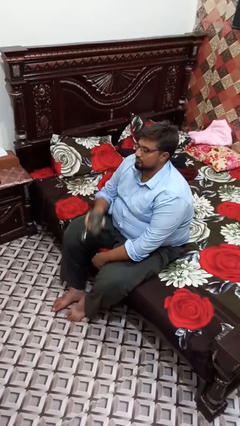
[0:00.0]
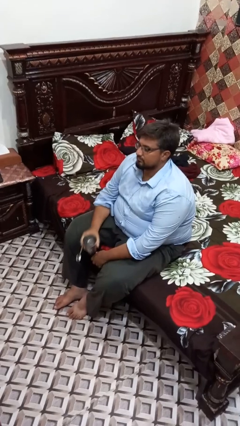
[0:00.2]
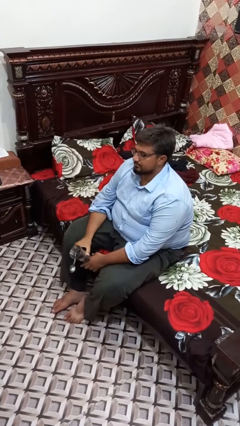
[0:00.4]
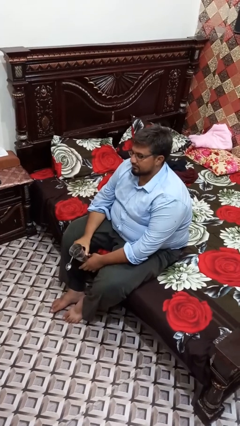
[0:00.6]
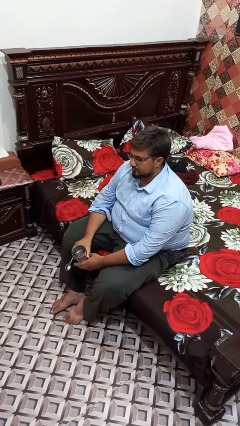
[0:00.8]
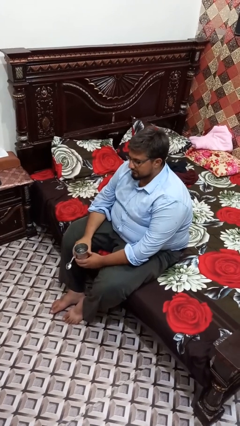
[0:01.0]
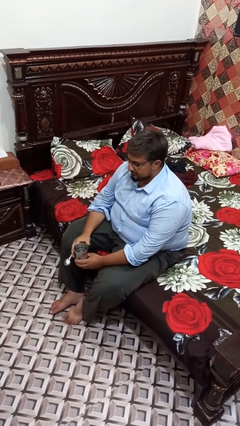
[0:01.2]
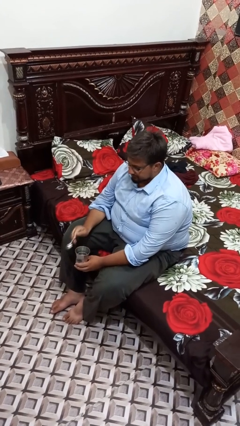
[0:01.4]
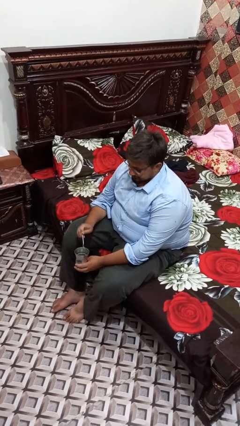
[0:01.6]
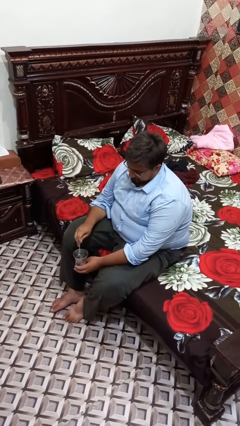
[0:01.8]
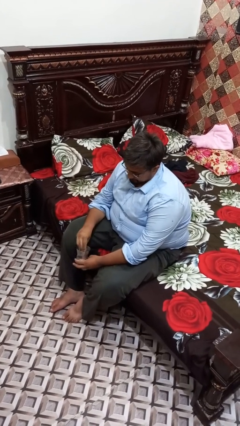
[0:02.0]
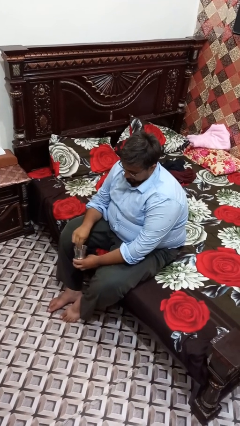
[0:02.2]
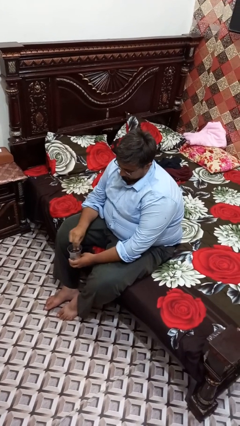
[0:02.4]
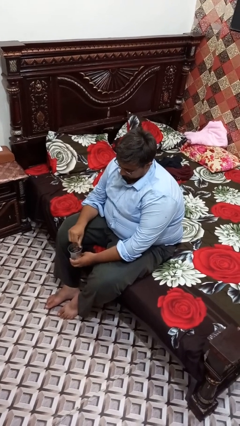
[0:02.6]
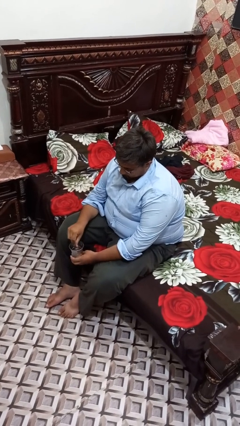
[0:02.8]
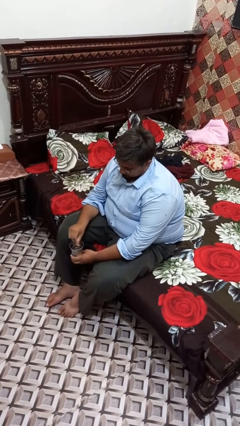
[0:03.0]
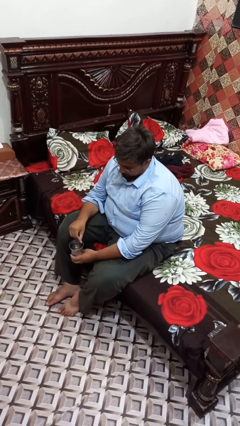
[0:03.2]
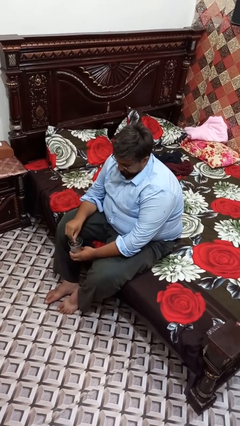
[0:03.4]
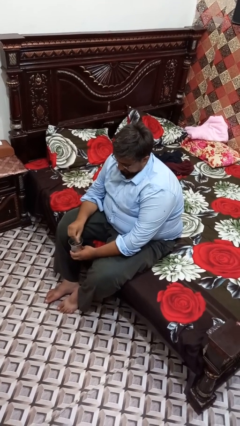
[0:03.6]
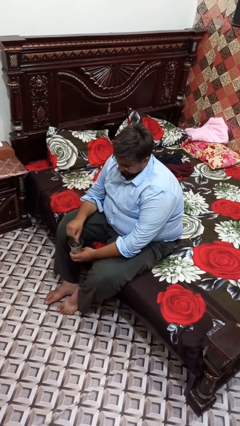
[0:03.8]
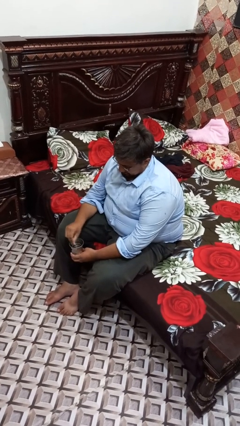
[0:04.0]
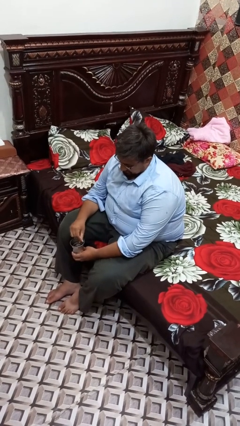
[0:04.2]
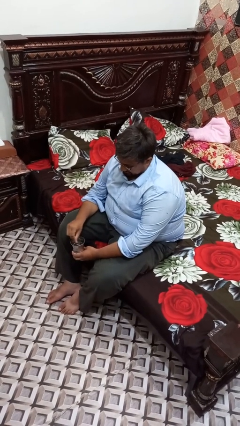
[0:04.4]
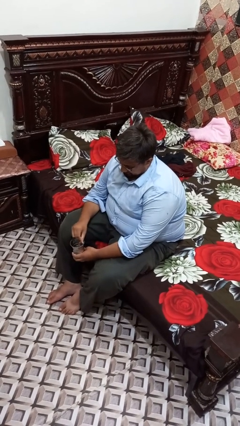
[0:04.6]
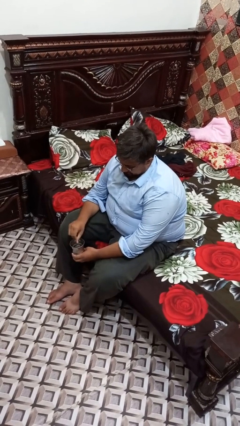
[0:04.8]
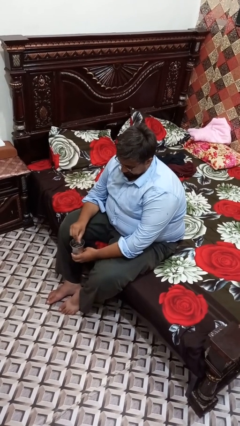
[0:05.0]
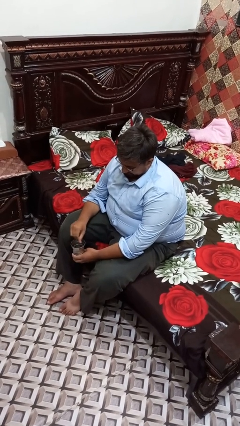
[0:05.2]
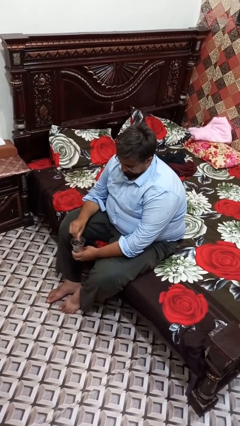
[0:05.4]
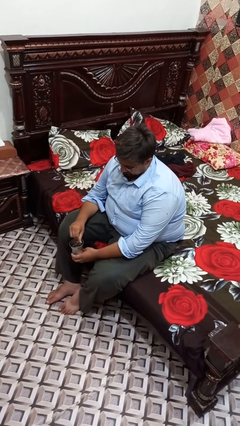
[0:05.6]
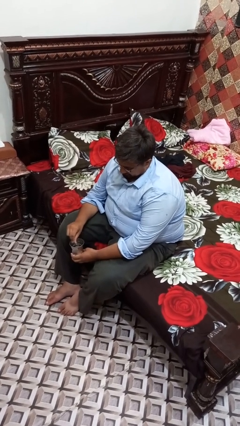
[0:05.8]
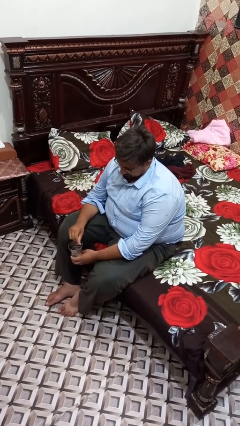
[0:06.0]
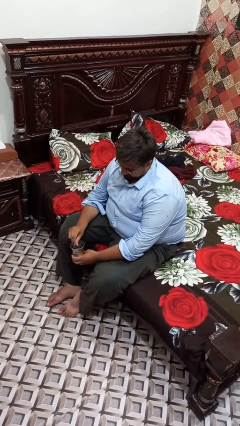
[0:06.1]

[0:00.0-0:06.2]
person stirs mug

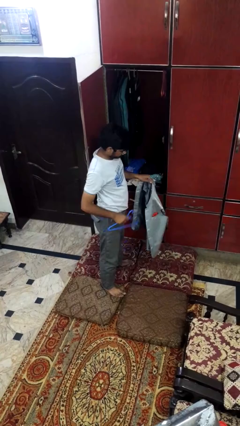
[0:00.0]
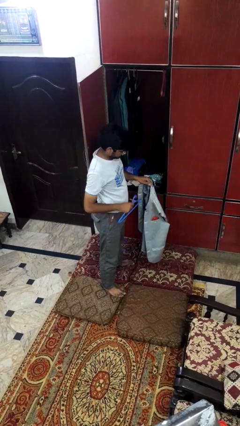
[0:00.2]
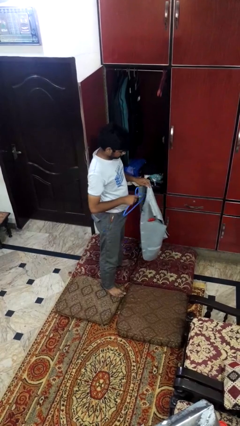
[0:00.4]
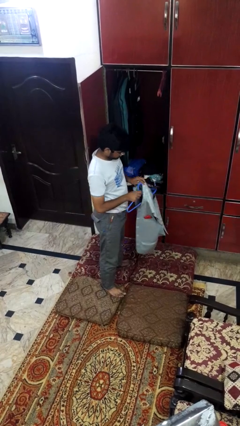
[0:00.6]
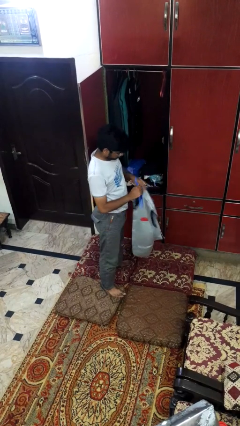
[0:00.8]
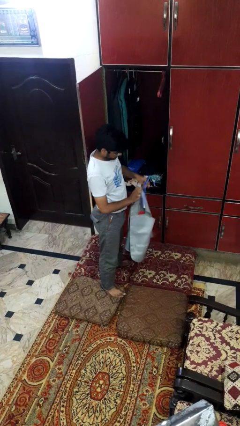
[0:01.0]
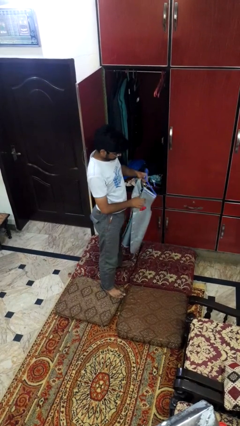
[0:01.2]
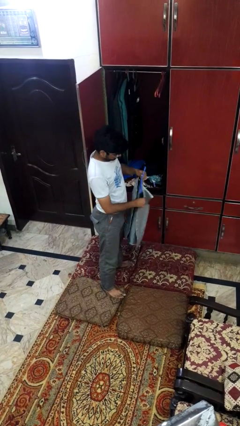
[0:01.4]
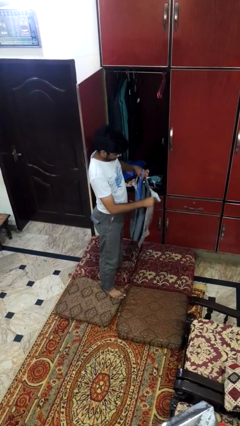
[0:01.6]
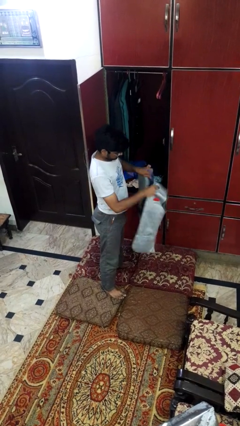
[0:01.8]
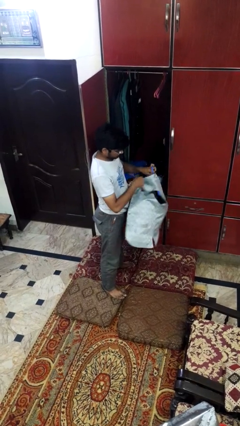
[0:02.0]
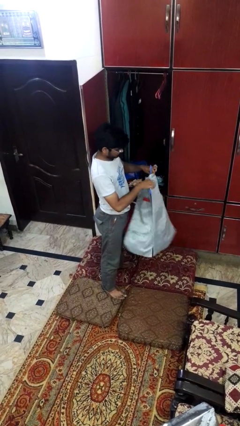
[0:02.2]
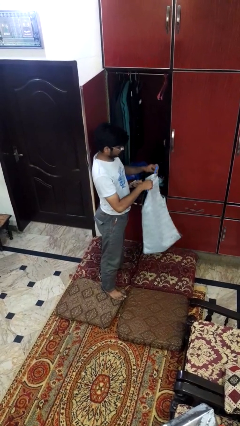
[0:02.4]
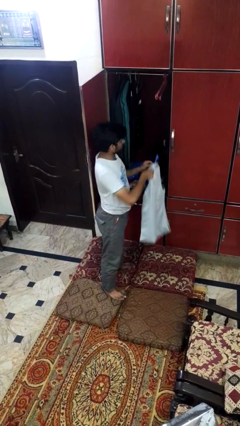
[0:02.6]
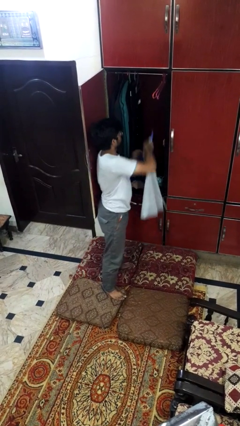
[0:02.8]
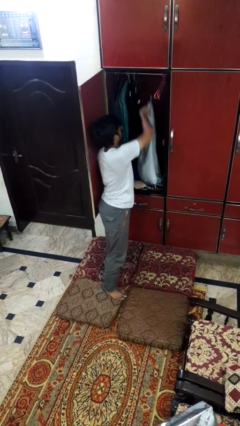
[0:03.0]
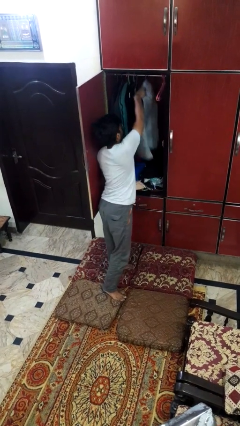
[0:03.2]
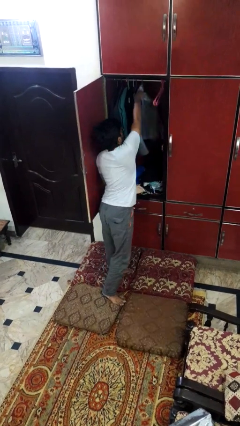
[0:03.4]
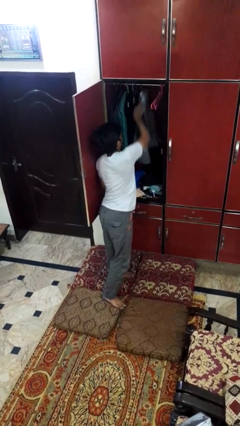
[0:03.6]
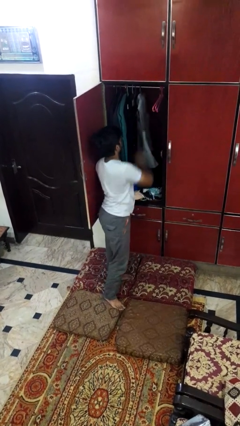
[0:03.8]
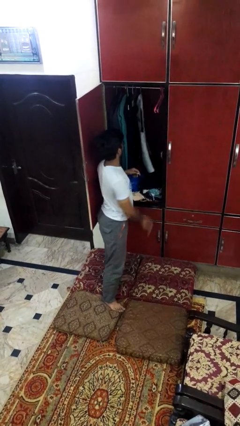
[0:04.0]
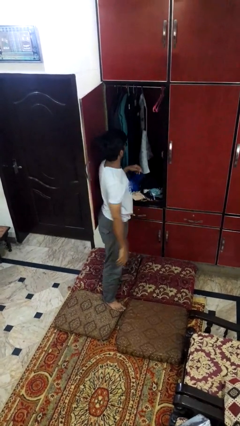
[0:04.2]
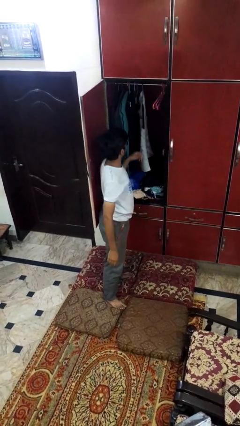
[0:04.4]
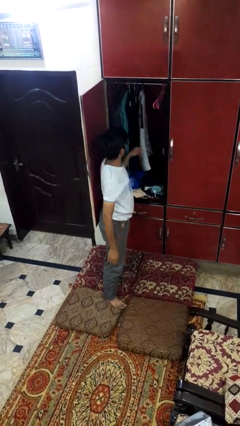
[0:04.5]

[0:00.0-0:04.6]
person puts clothes into closet

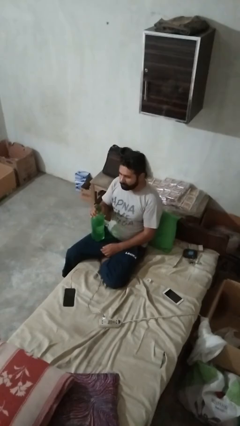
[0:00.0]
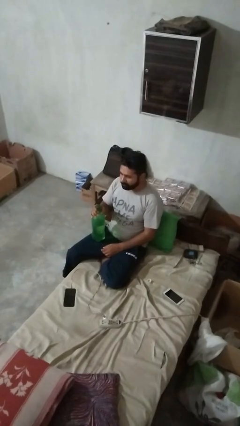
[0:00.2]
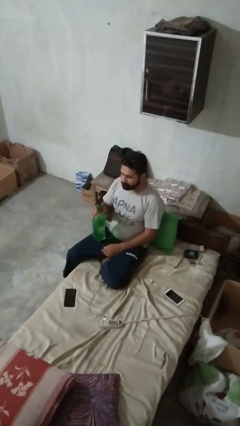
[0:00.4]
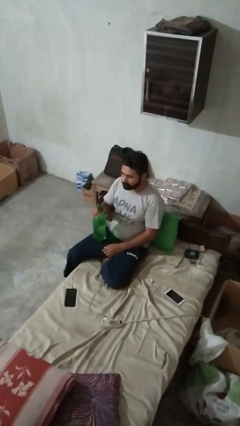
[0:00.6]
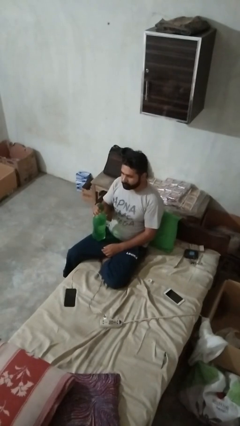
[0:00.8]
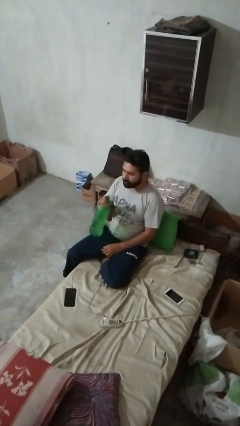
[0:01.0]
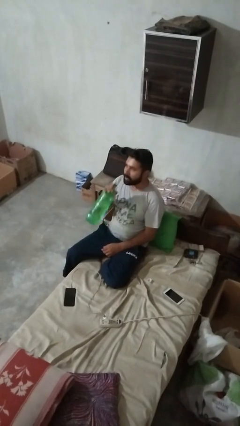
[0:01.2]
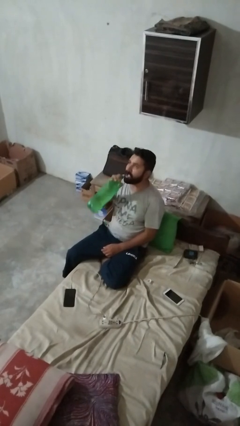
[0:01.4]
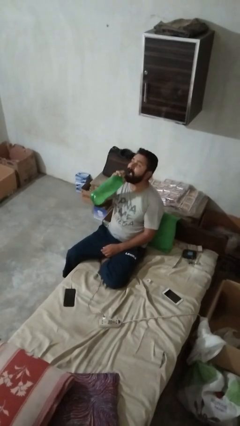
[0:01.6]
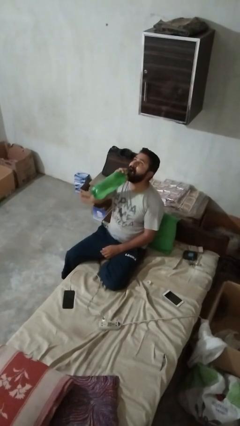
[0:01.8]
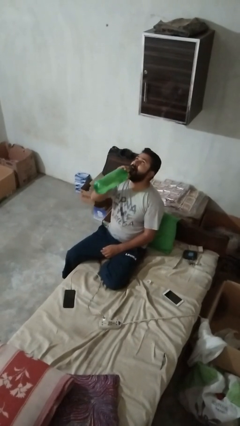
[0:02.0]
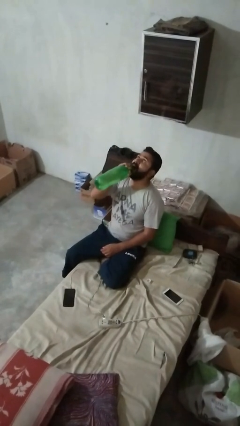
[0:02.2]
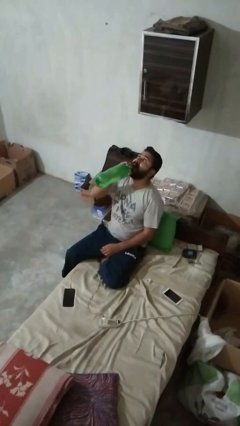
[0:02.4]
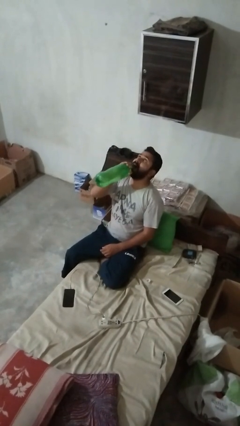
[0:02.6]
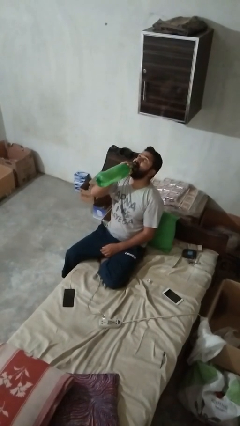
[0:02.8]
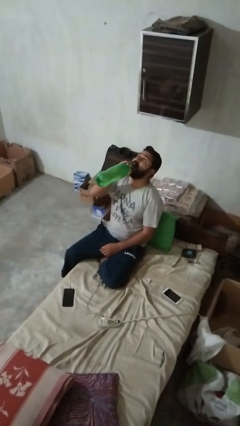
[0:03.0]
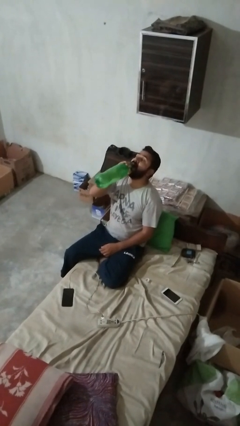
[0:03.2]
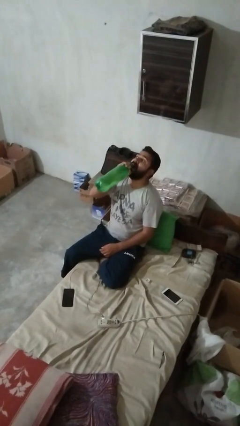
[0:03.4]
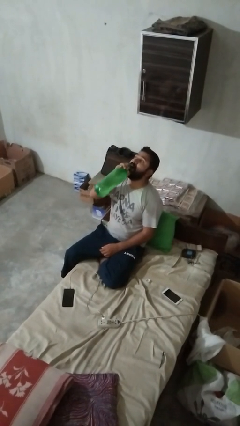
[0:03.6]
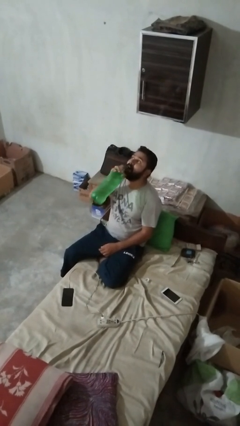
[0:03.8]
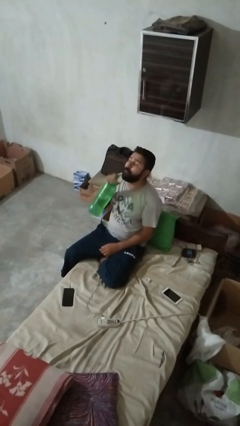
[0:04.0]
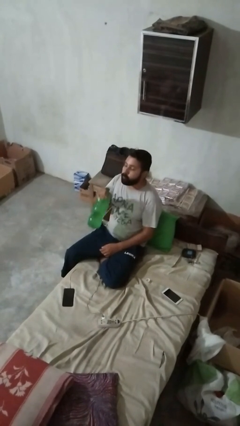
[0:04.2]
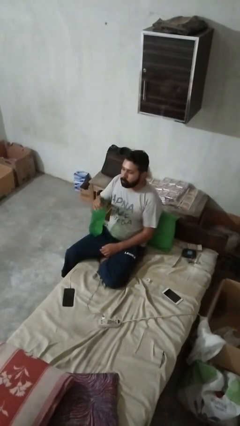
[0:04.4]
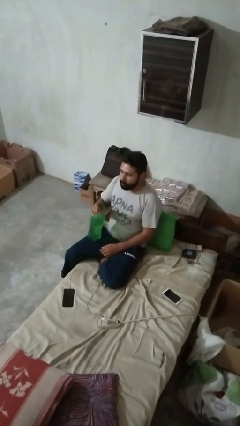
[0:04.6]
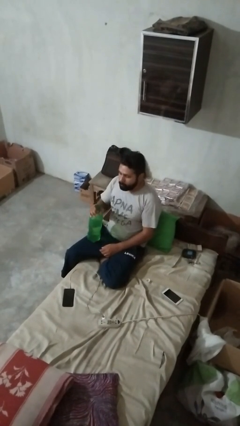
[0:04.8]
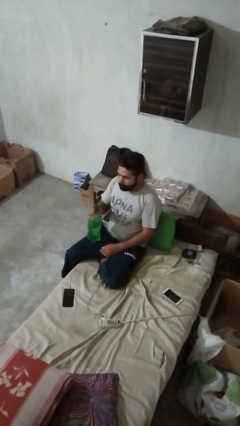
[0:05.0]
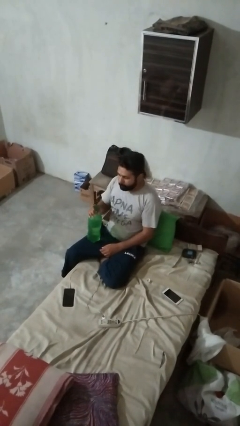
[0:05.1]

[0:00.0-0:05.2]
person drinks from bottle

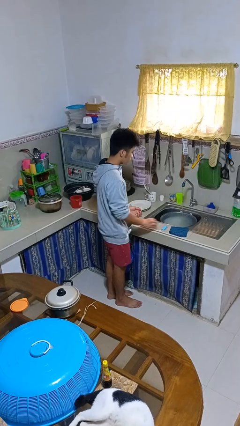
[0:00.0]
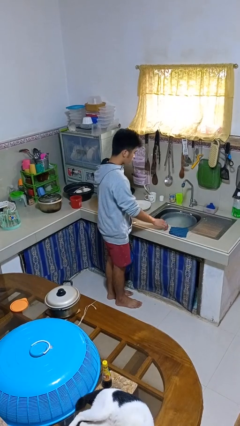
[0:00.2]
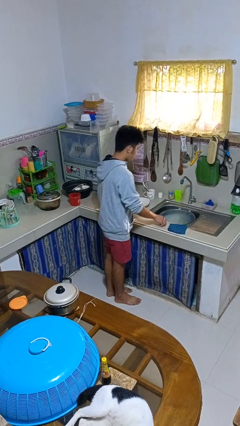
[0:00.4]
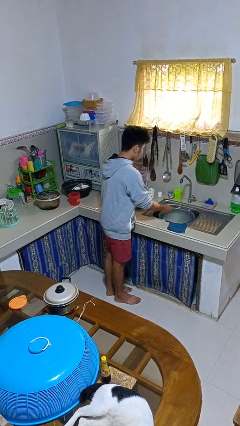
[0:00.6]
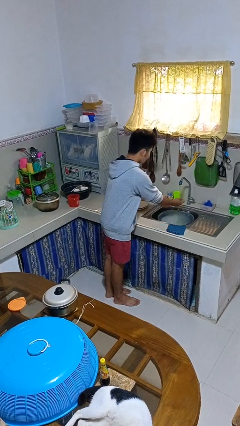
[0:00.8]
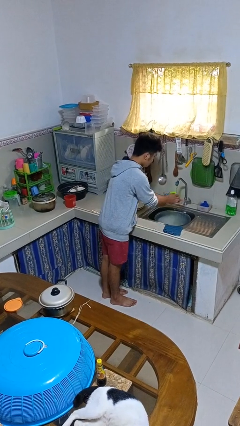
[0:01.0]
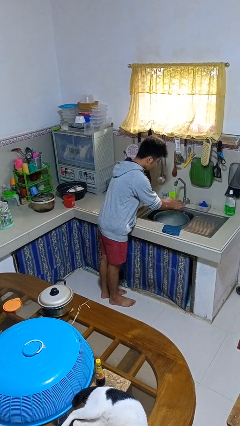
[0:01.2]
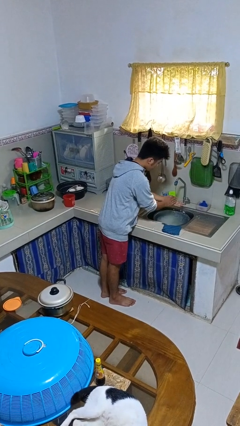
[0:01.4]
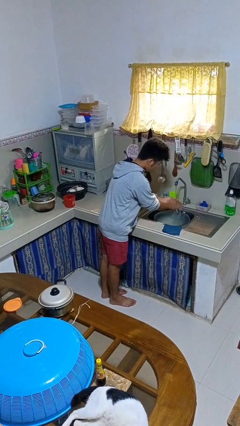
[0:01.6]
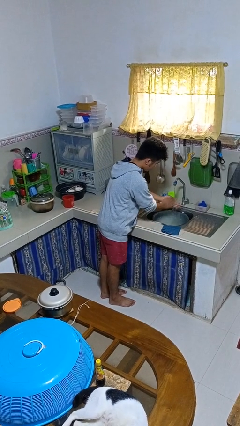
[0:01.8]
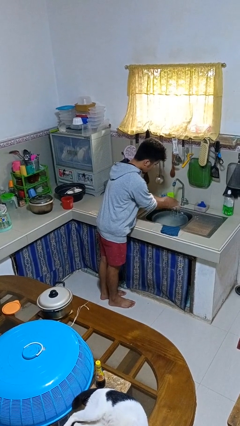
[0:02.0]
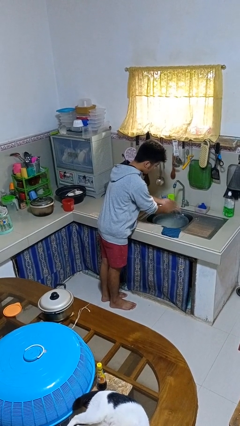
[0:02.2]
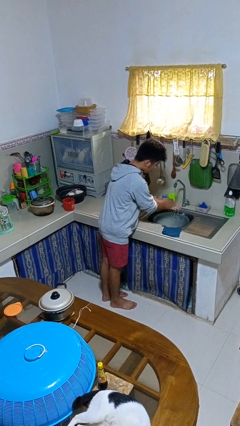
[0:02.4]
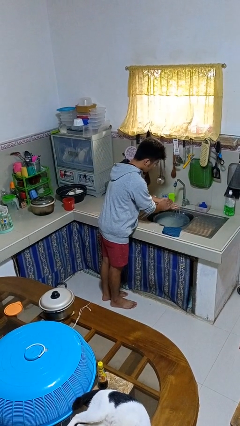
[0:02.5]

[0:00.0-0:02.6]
person washes hands
